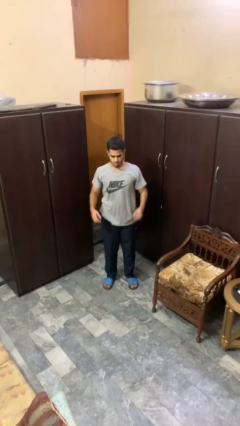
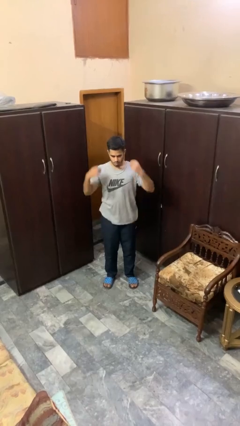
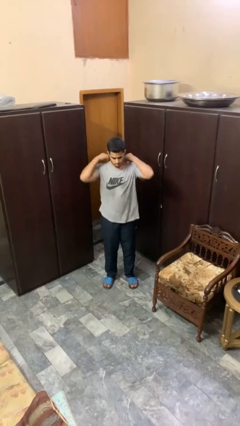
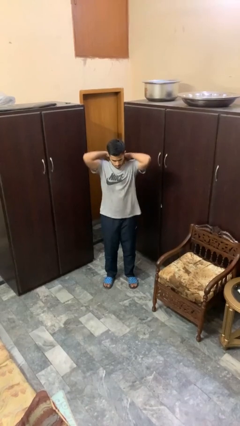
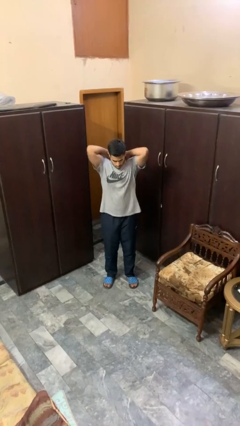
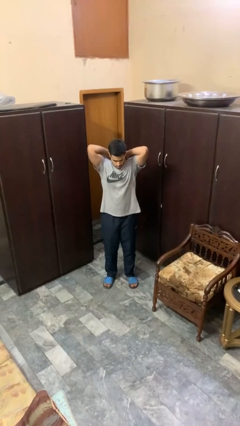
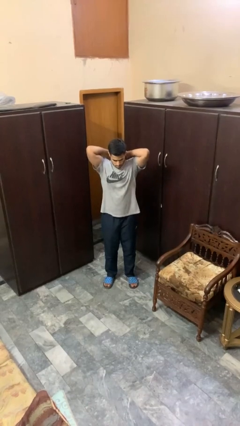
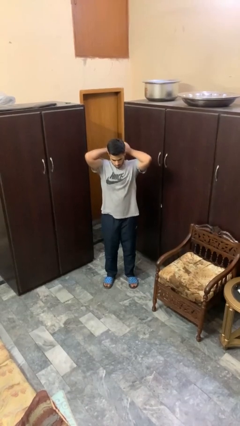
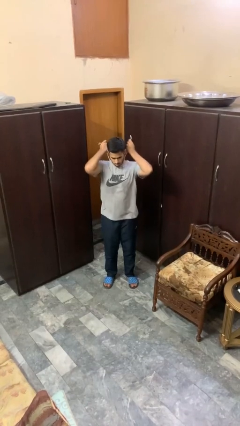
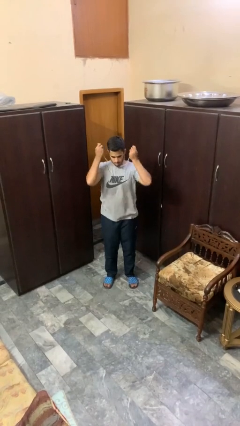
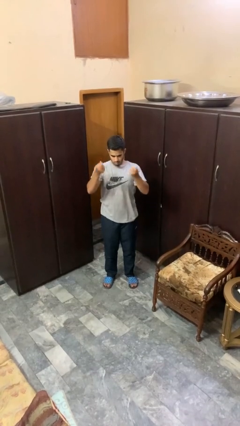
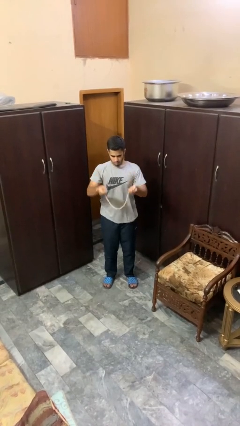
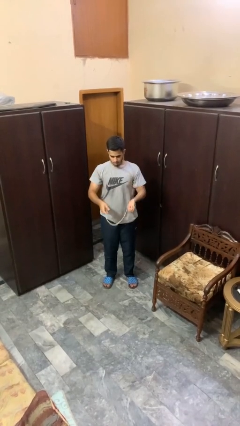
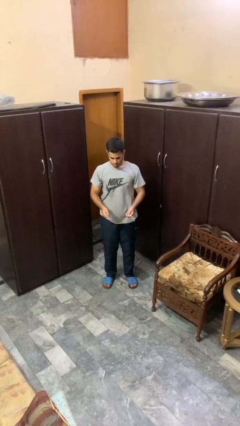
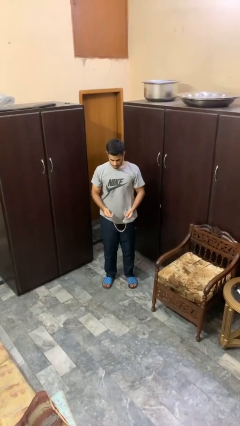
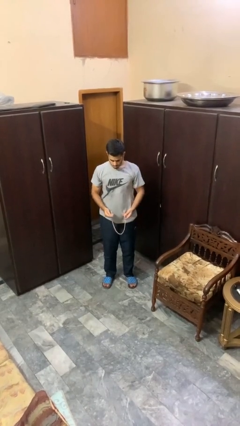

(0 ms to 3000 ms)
person takes off necklace

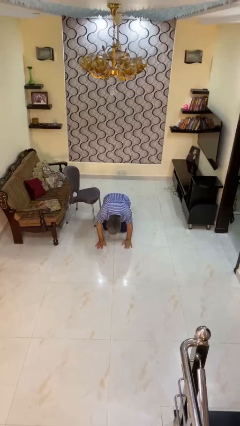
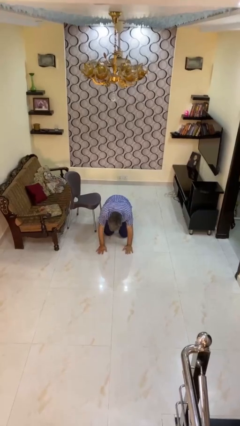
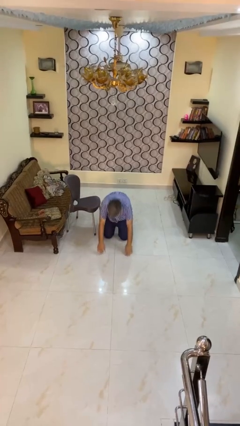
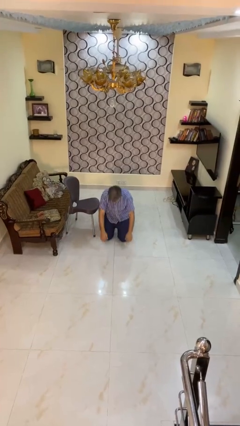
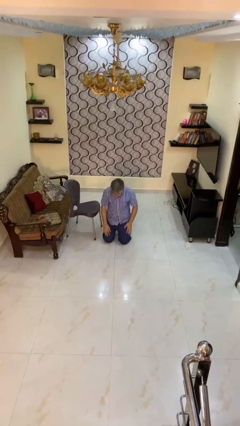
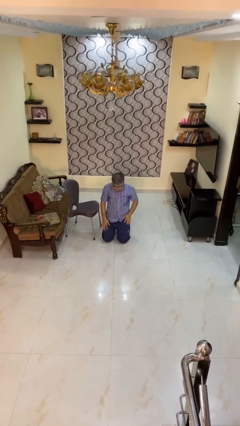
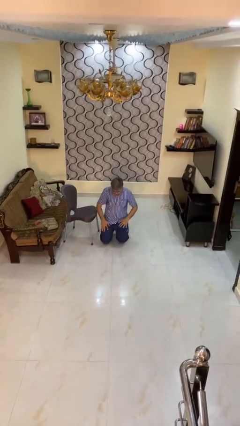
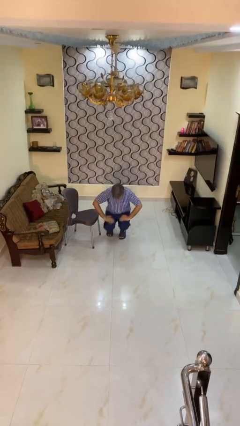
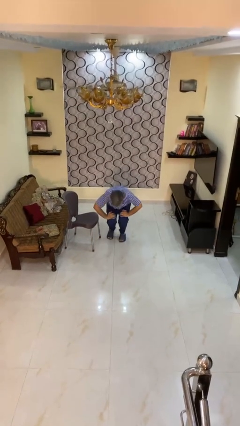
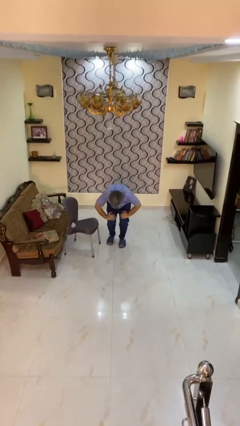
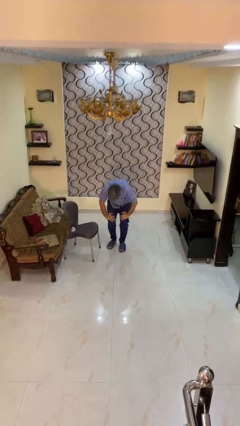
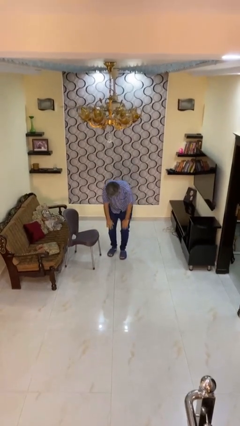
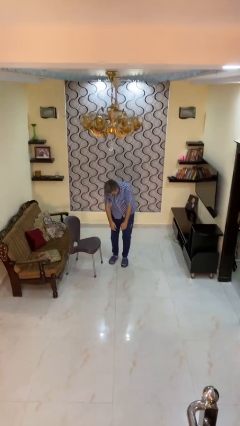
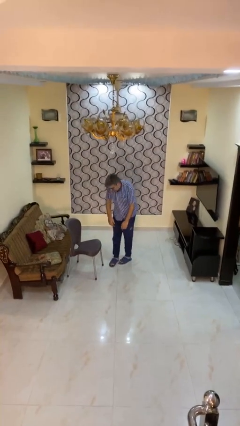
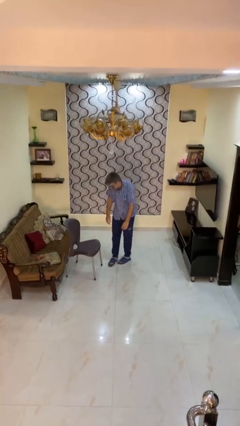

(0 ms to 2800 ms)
person stands up from floor

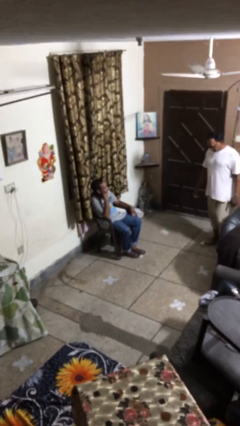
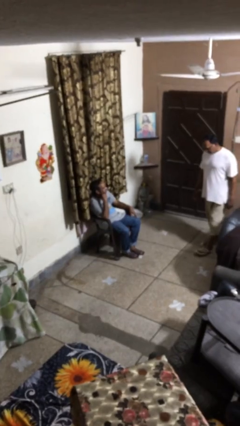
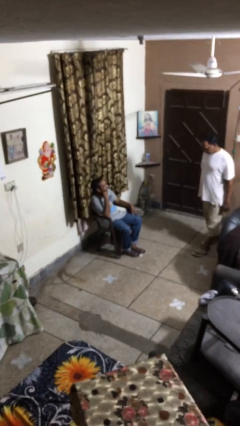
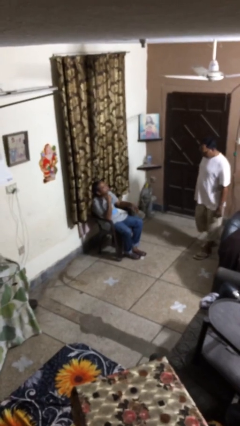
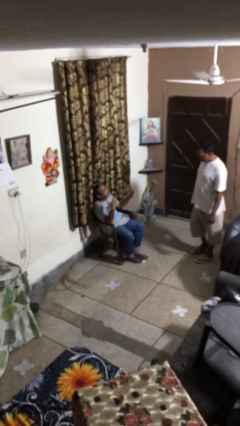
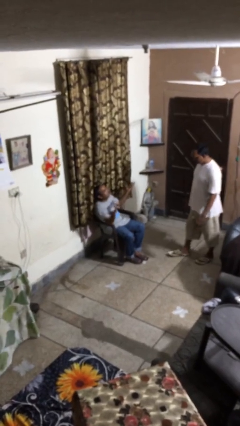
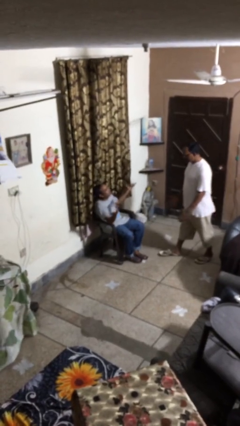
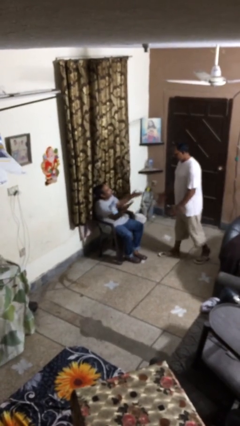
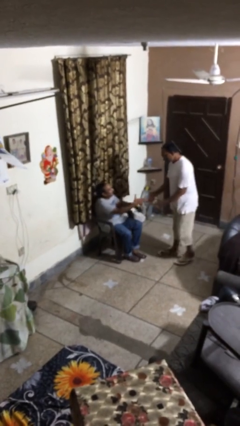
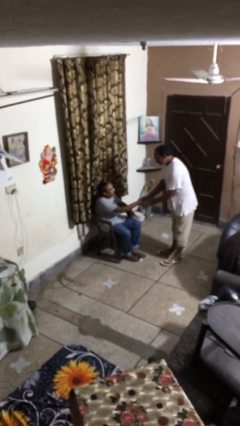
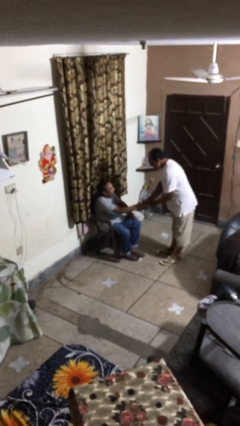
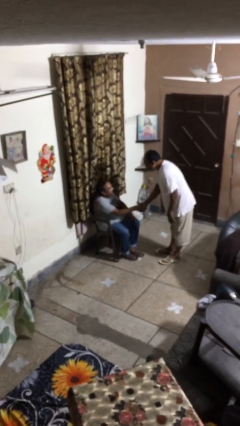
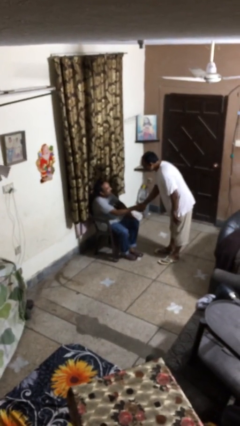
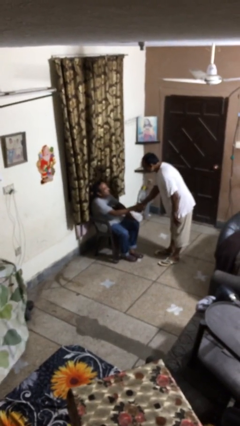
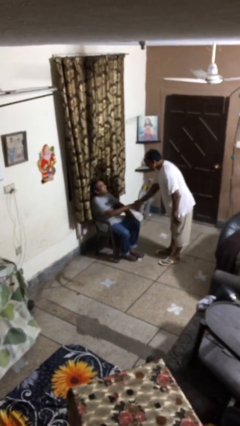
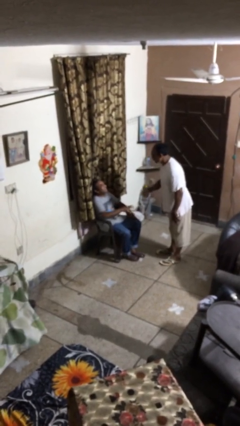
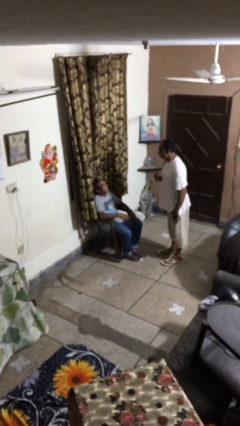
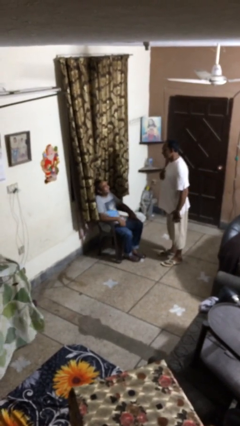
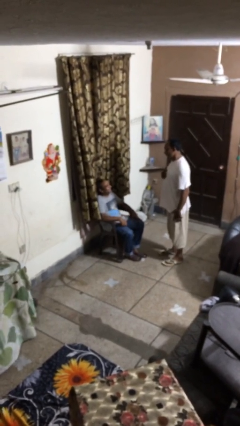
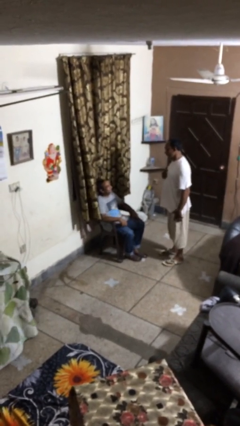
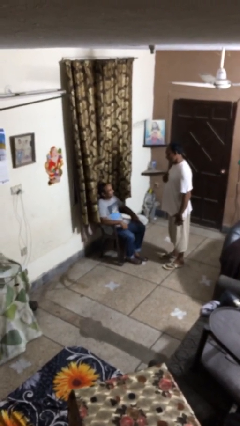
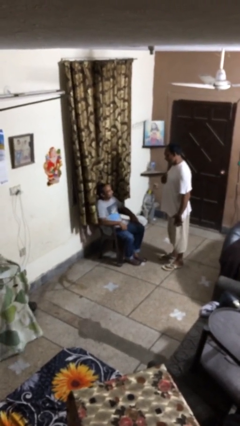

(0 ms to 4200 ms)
person shakes hand

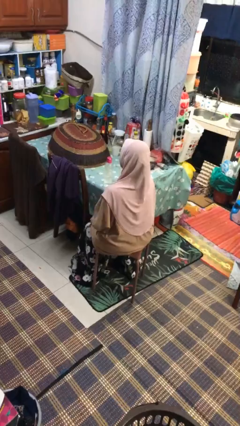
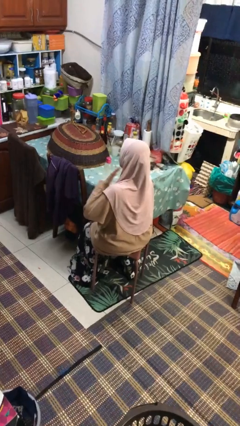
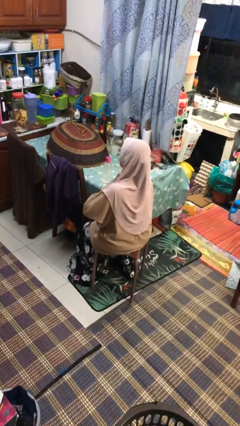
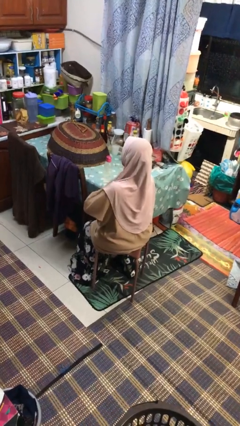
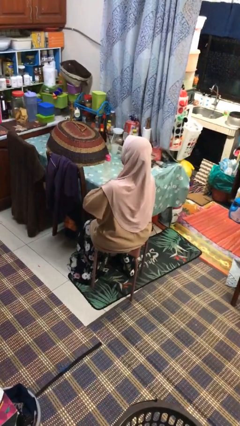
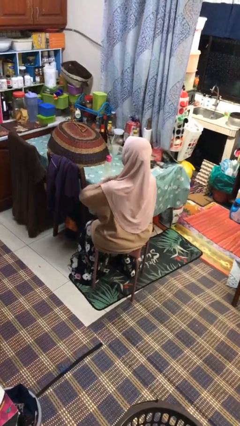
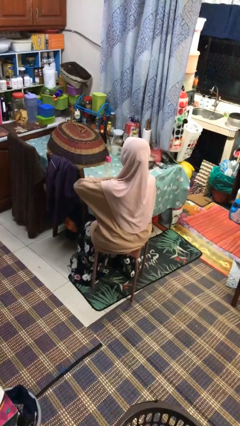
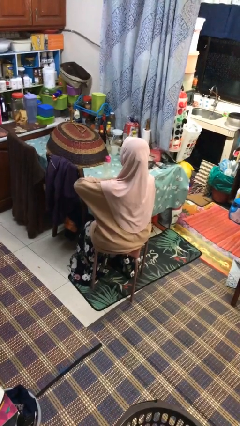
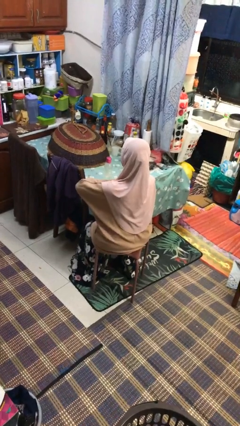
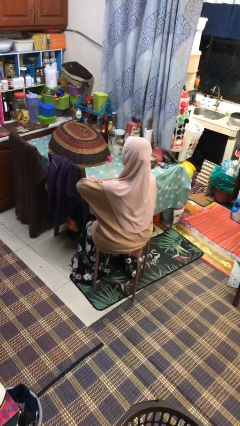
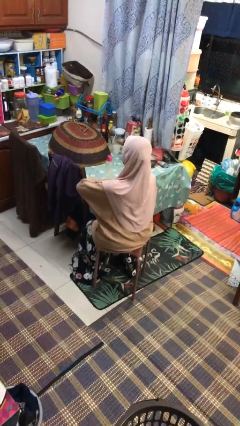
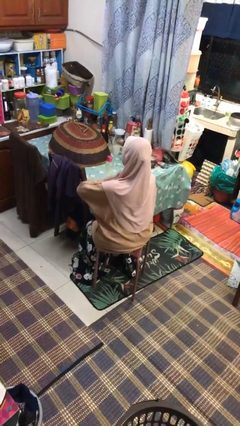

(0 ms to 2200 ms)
person drums on chest

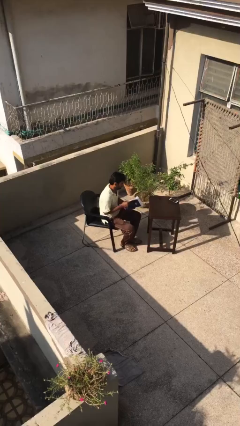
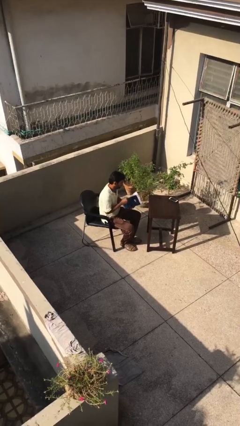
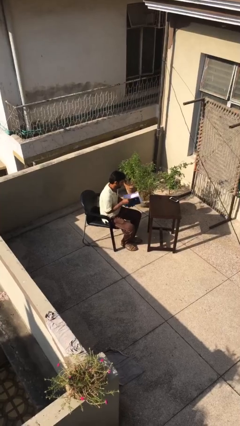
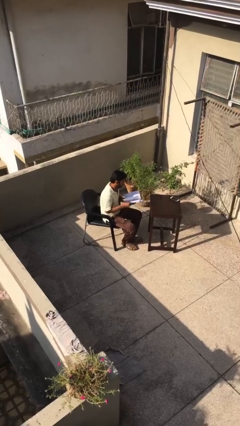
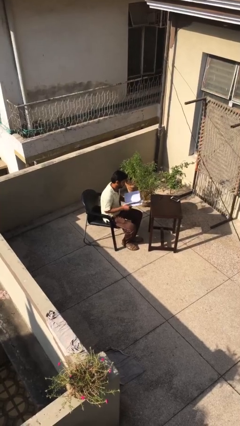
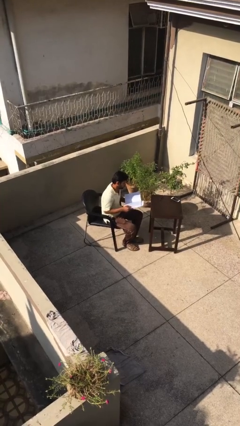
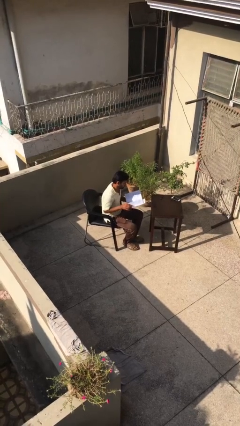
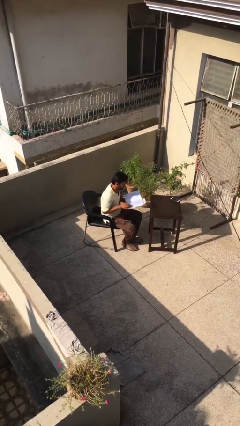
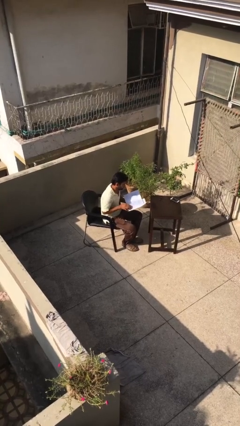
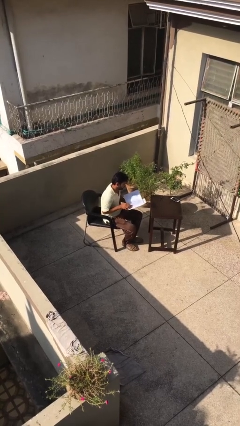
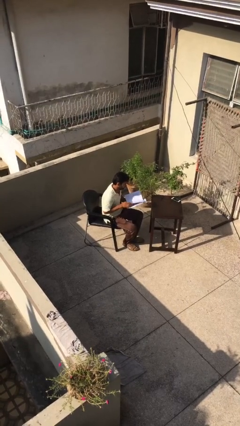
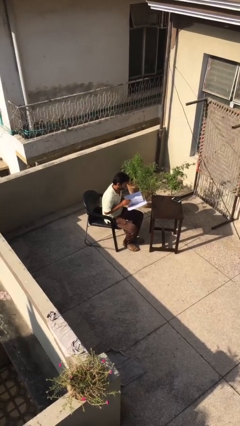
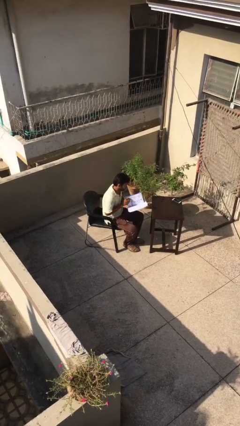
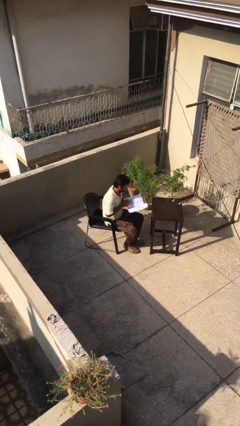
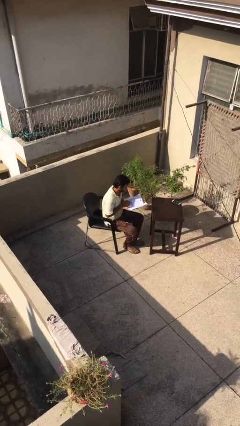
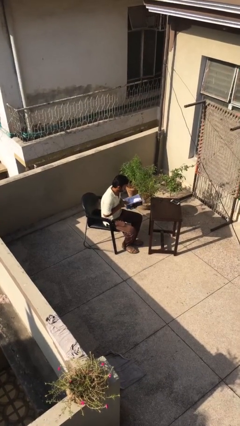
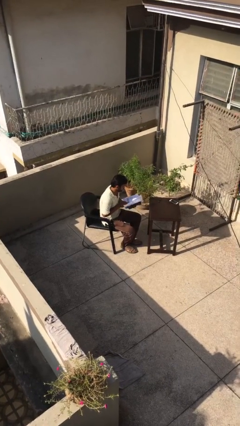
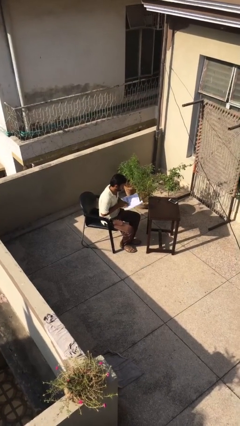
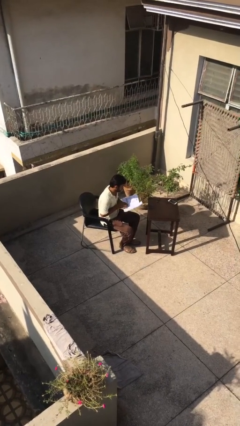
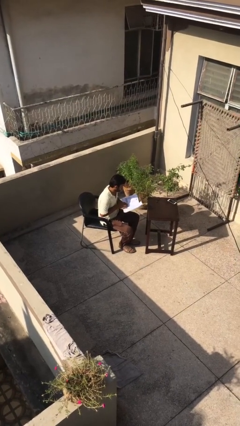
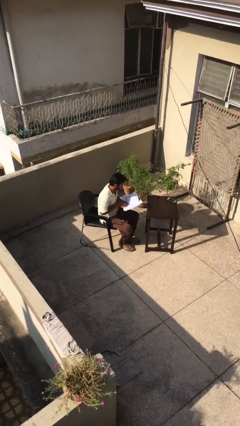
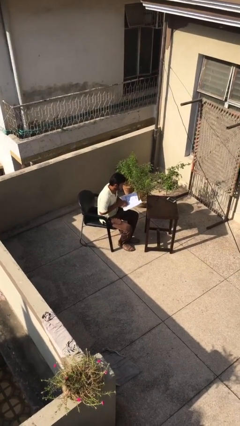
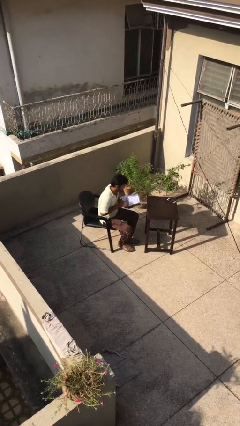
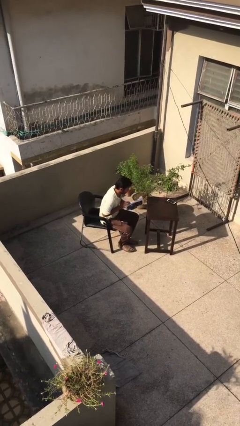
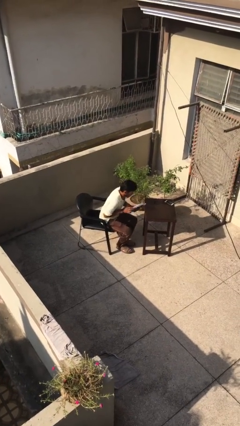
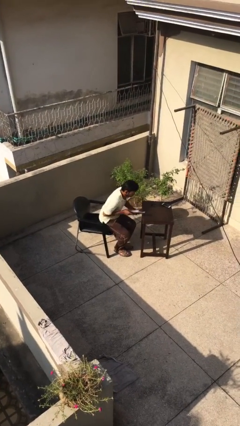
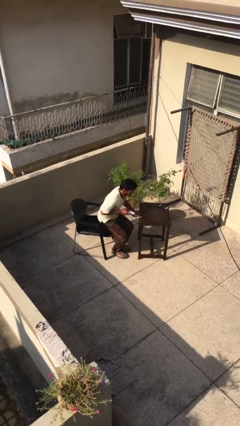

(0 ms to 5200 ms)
person reads document

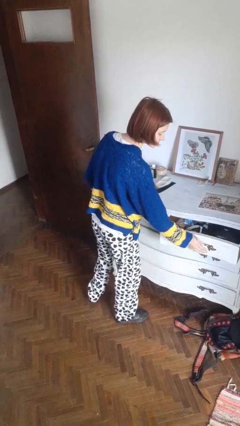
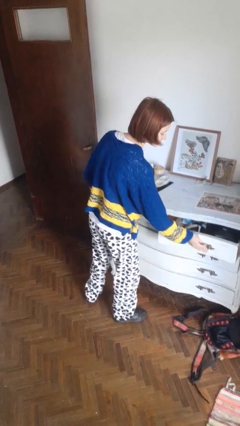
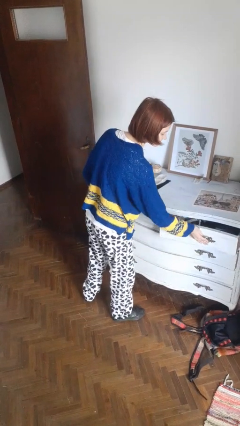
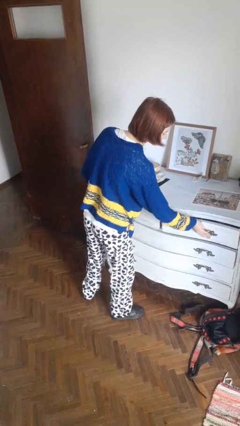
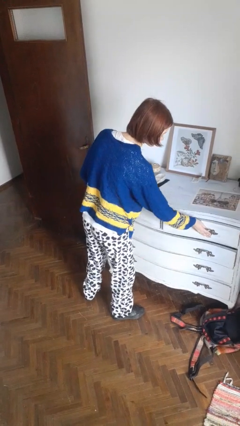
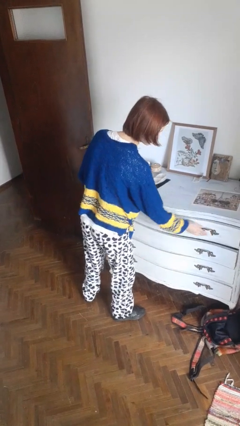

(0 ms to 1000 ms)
person closes dresser drawer
